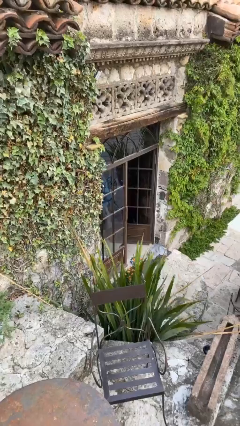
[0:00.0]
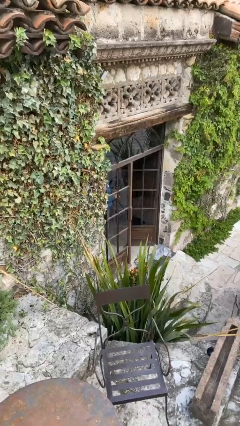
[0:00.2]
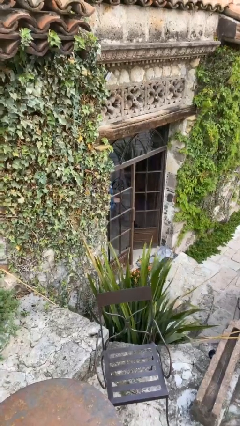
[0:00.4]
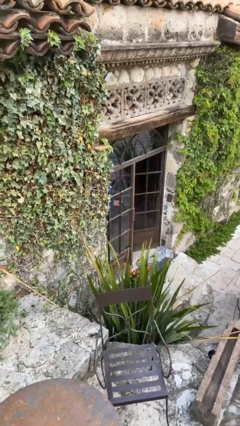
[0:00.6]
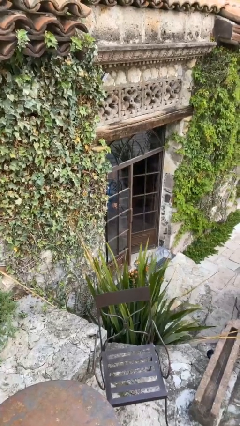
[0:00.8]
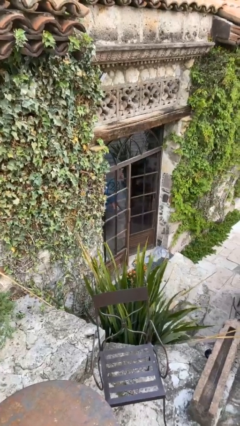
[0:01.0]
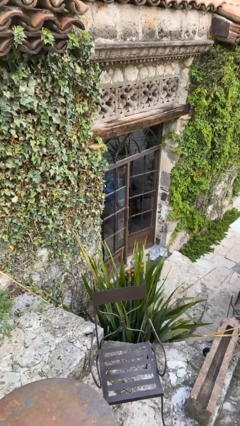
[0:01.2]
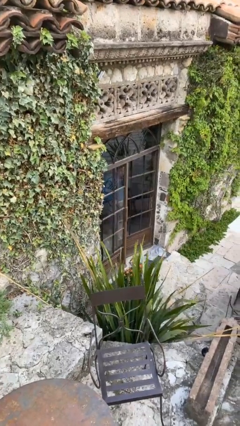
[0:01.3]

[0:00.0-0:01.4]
person closes facility door

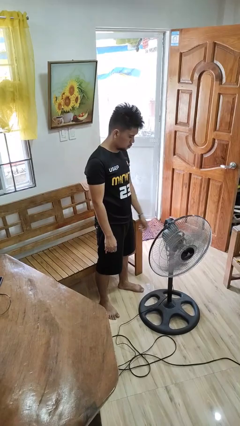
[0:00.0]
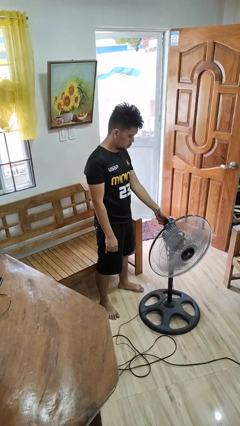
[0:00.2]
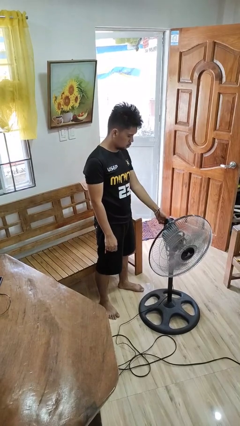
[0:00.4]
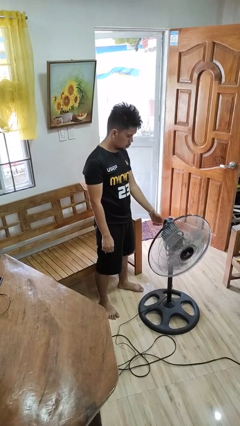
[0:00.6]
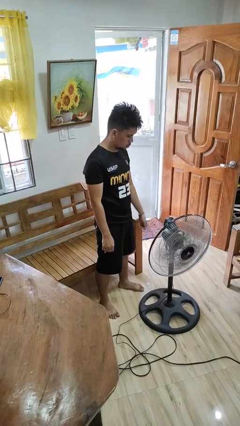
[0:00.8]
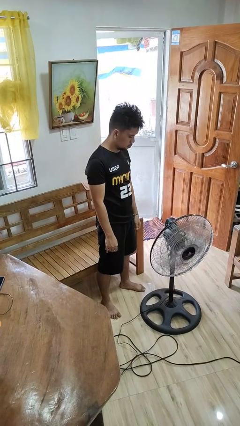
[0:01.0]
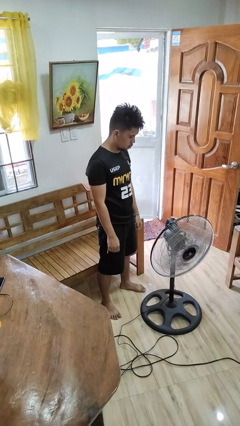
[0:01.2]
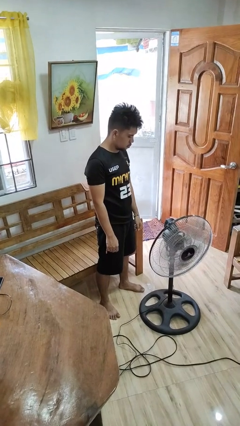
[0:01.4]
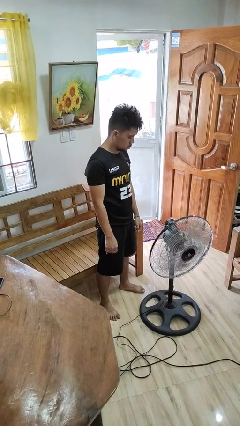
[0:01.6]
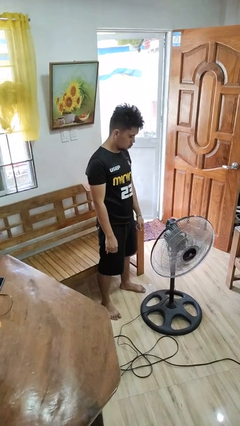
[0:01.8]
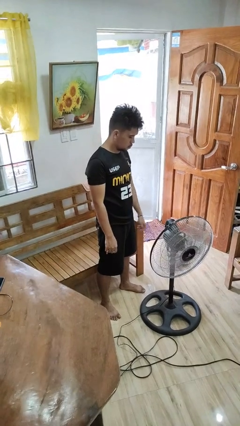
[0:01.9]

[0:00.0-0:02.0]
person turns on fan

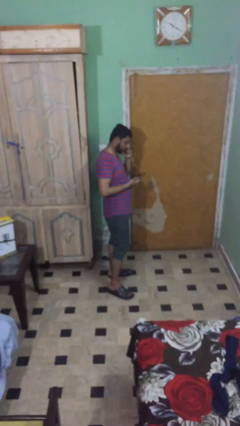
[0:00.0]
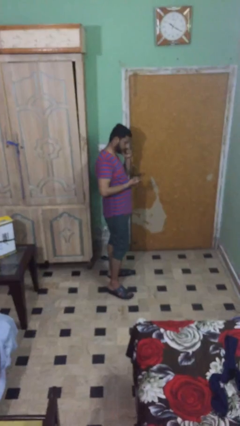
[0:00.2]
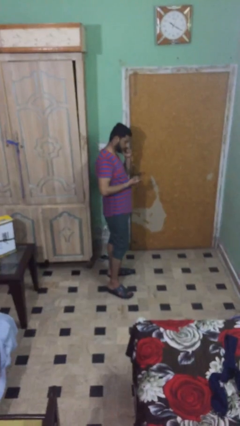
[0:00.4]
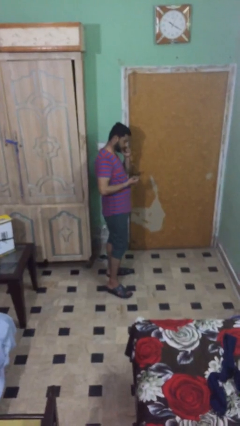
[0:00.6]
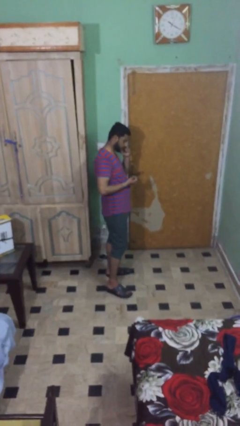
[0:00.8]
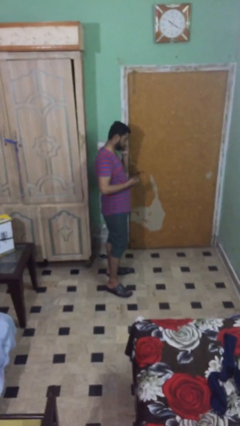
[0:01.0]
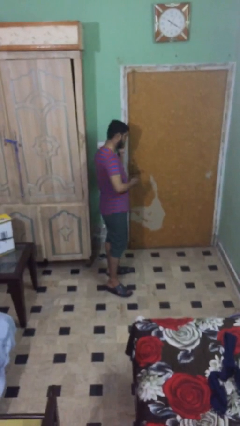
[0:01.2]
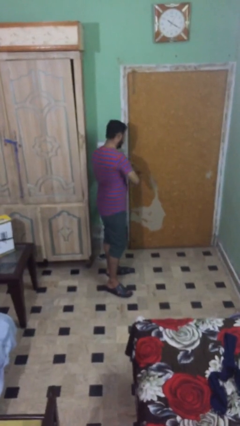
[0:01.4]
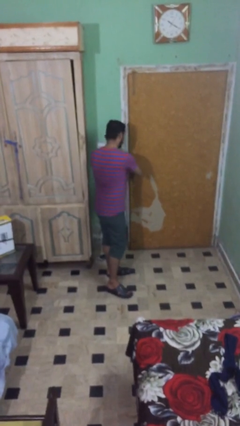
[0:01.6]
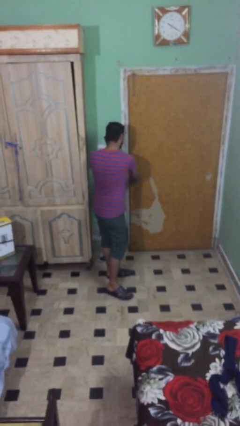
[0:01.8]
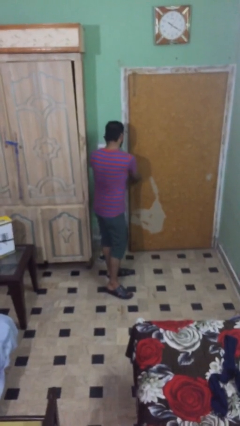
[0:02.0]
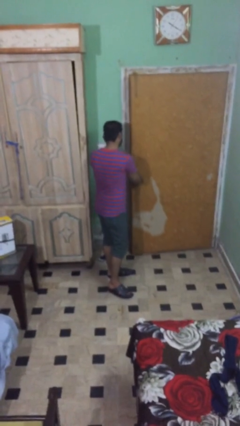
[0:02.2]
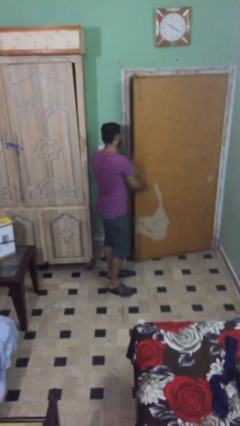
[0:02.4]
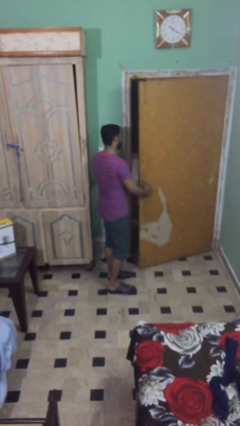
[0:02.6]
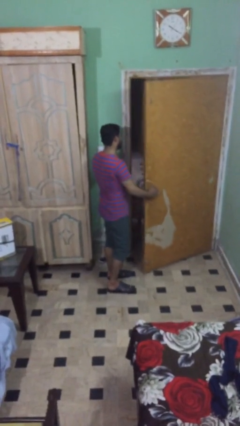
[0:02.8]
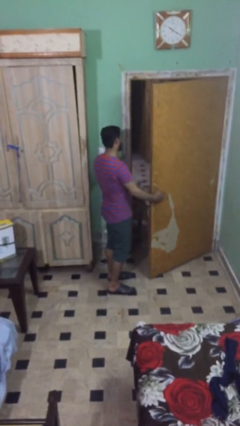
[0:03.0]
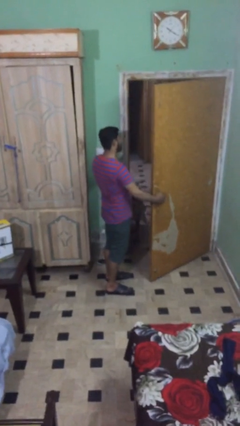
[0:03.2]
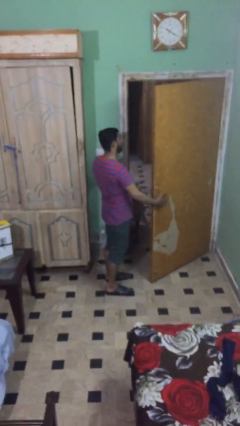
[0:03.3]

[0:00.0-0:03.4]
person opens facility door

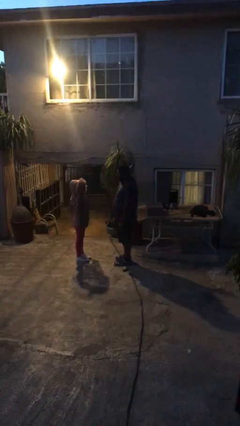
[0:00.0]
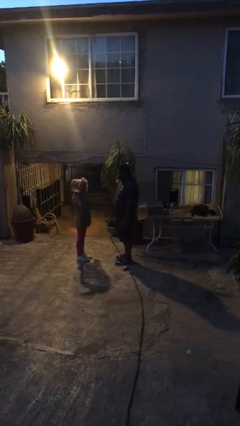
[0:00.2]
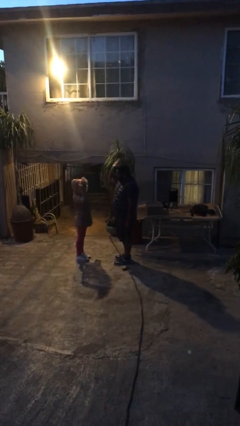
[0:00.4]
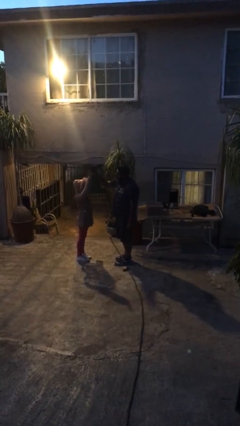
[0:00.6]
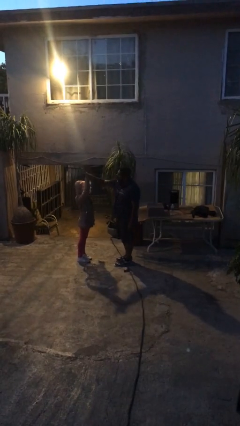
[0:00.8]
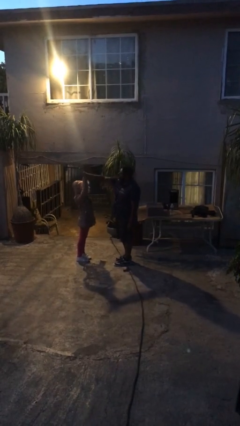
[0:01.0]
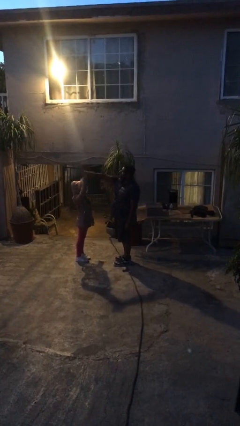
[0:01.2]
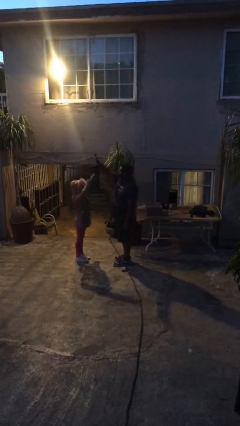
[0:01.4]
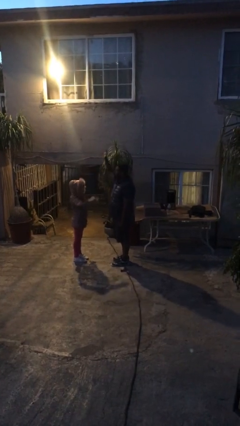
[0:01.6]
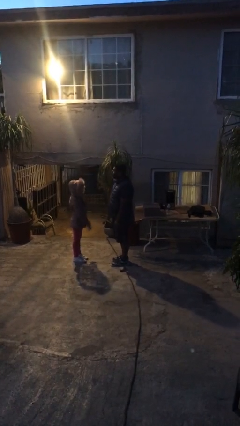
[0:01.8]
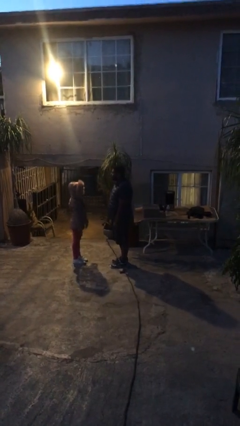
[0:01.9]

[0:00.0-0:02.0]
person highfives hand

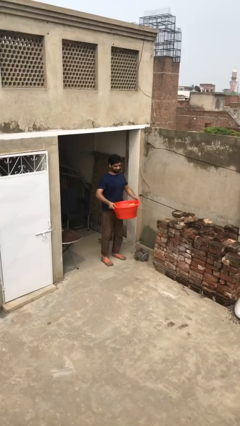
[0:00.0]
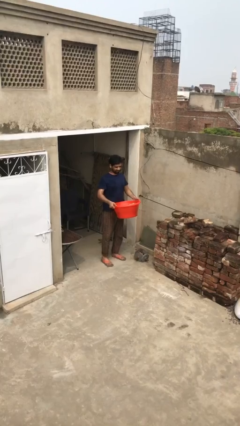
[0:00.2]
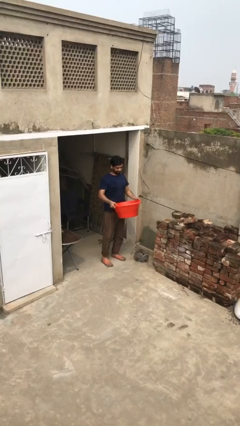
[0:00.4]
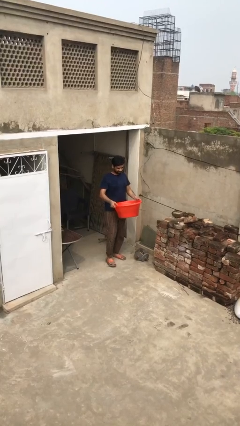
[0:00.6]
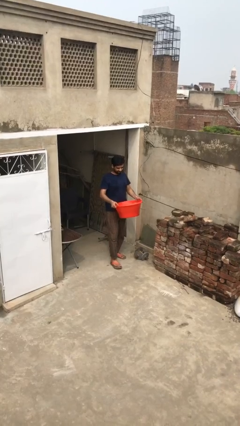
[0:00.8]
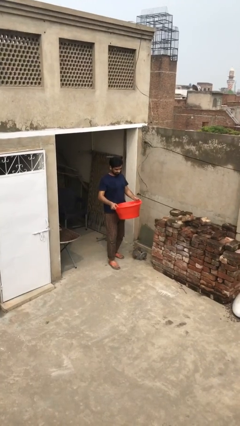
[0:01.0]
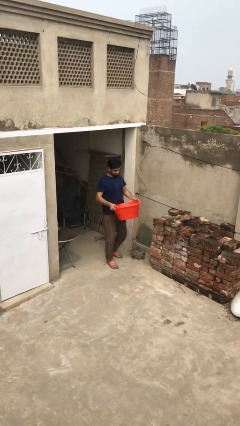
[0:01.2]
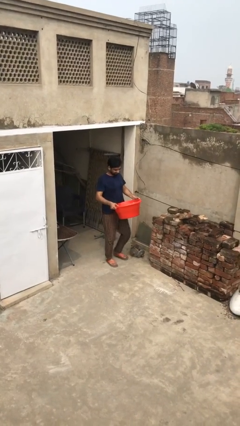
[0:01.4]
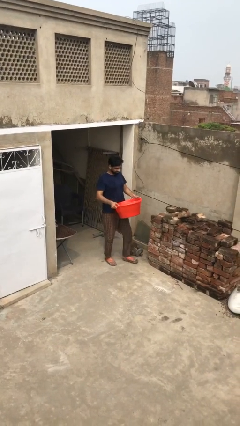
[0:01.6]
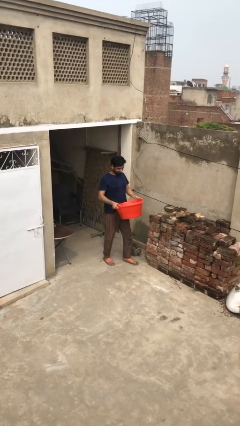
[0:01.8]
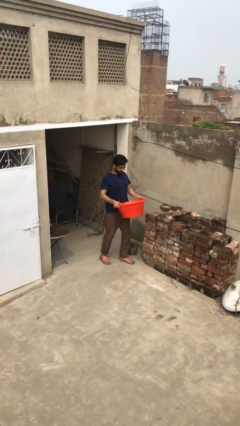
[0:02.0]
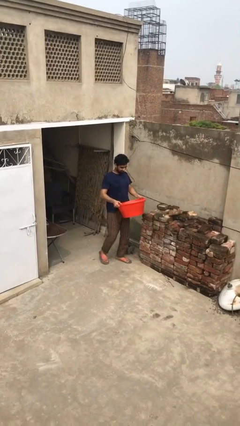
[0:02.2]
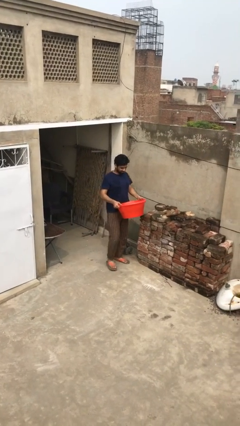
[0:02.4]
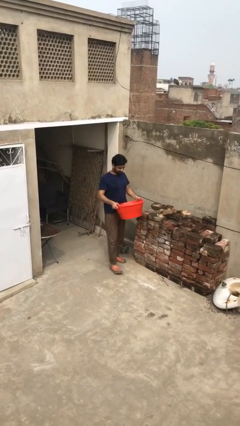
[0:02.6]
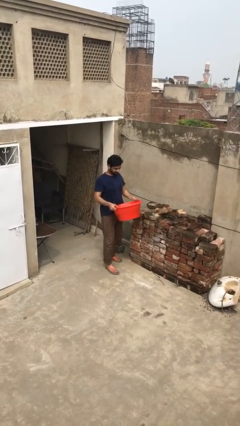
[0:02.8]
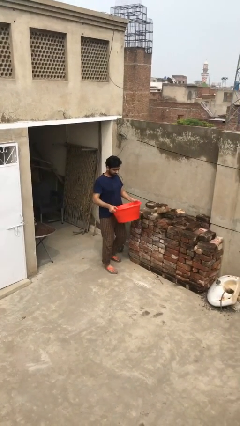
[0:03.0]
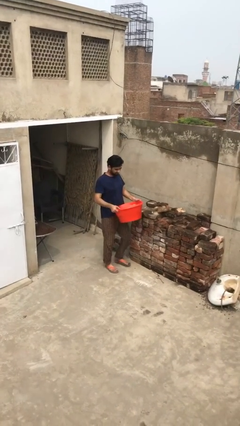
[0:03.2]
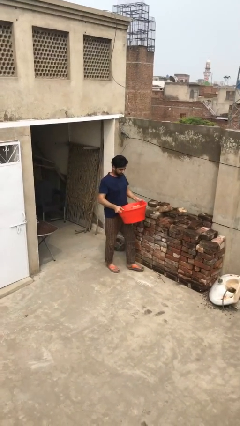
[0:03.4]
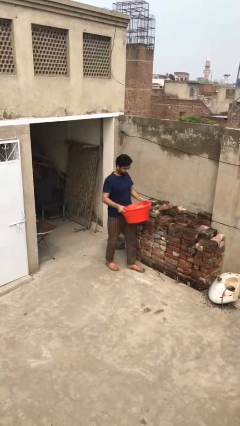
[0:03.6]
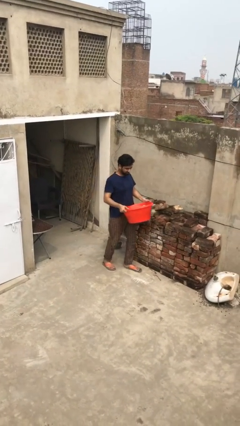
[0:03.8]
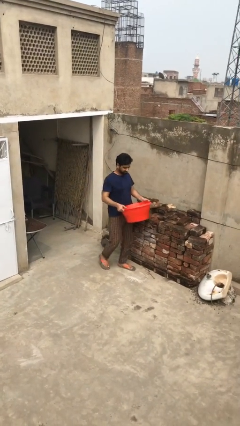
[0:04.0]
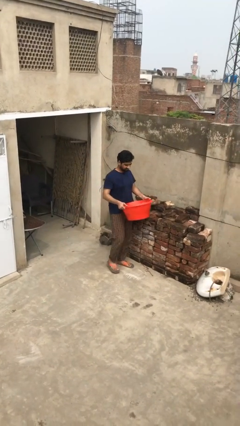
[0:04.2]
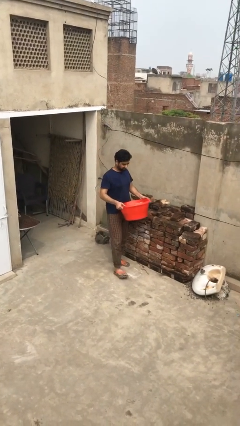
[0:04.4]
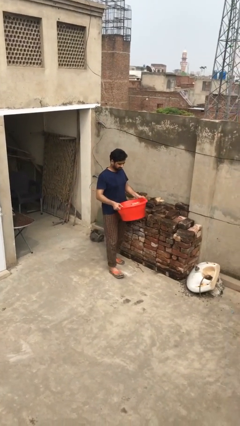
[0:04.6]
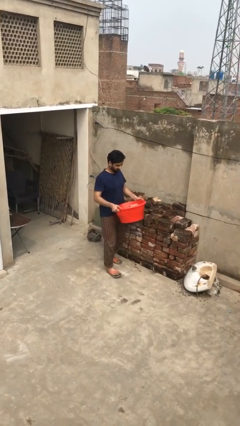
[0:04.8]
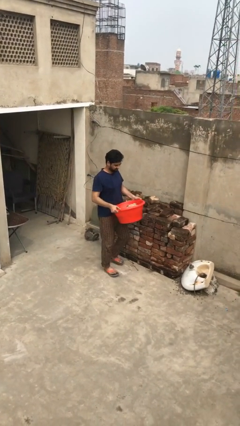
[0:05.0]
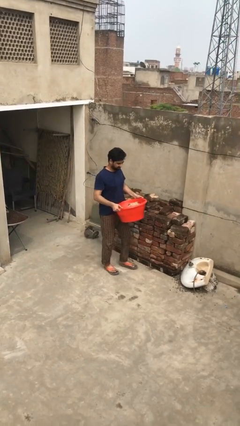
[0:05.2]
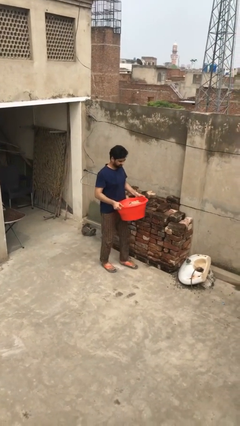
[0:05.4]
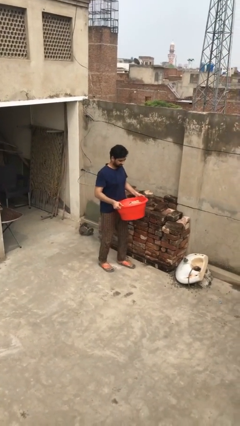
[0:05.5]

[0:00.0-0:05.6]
person carries heavy object

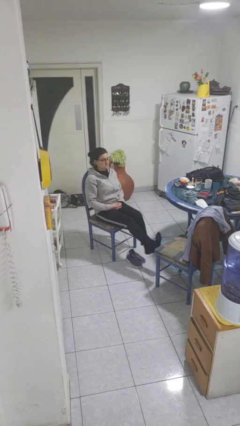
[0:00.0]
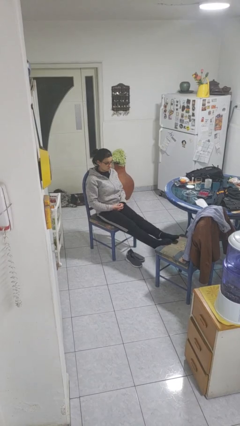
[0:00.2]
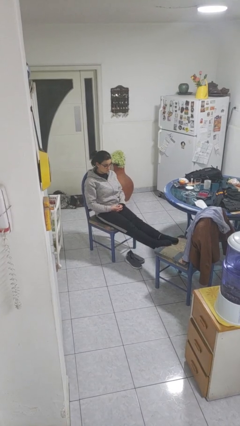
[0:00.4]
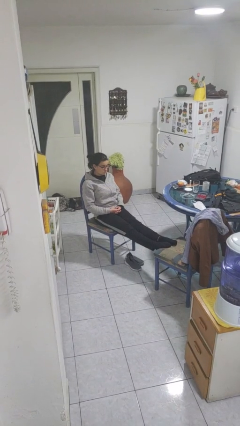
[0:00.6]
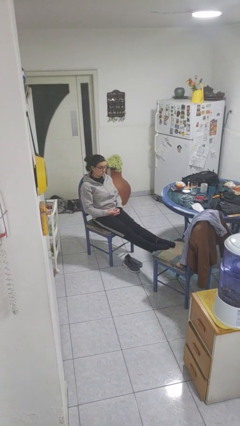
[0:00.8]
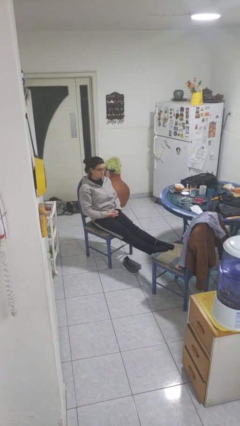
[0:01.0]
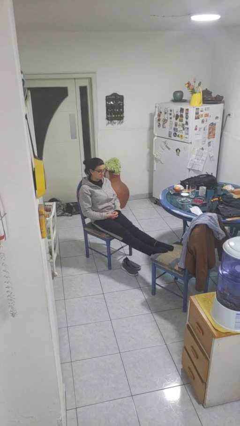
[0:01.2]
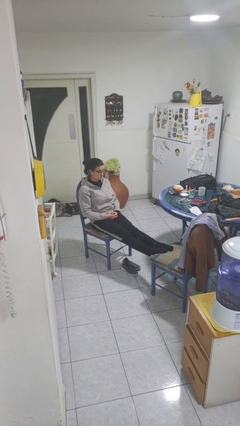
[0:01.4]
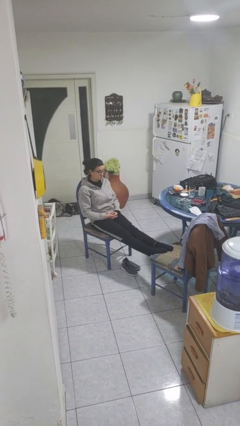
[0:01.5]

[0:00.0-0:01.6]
person puts feet up

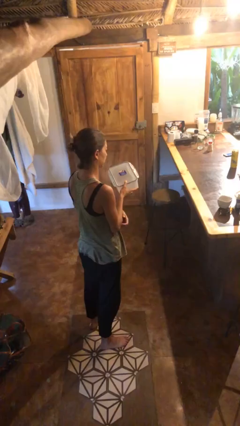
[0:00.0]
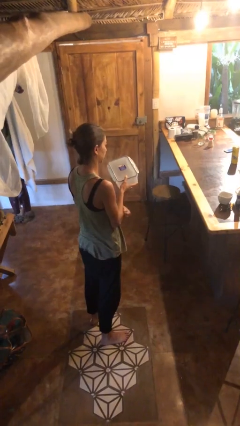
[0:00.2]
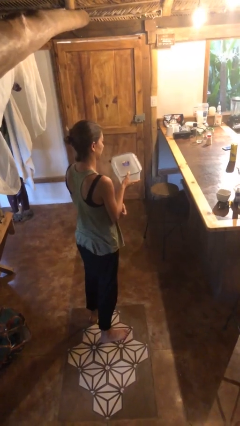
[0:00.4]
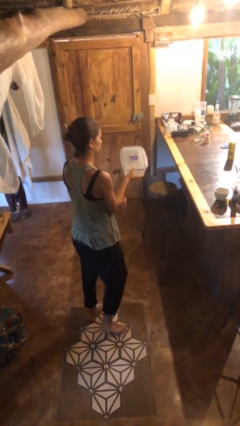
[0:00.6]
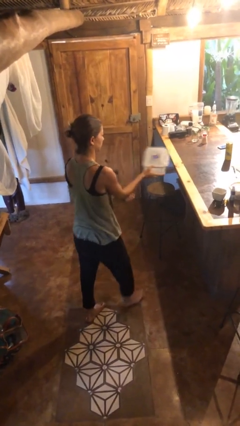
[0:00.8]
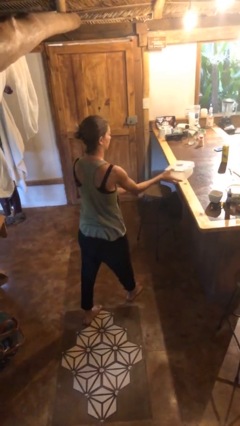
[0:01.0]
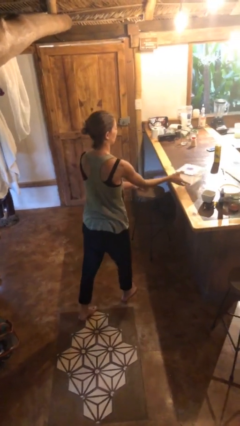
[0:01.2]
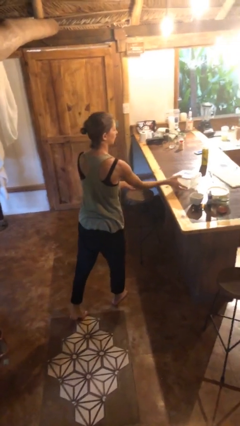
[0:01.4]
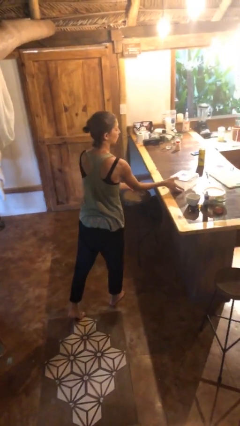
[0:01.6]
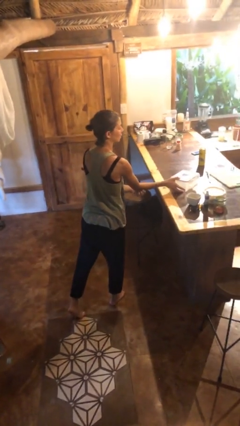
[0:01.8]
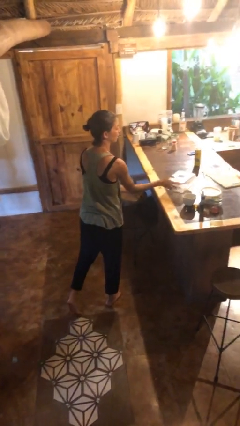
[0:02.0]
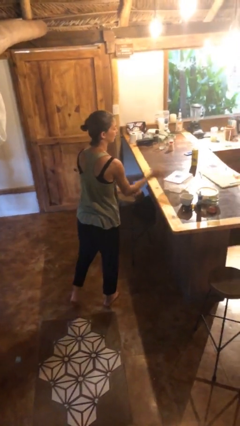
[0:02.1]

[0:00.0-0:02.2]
person puts down object on table
